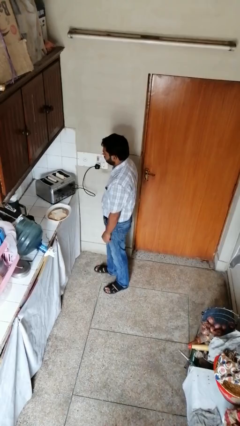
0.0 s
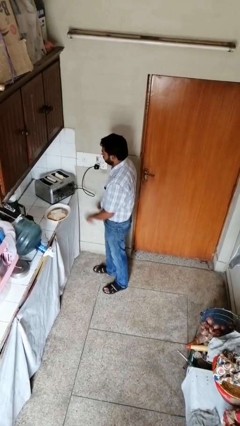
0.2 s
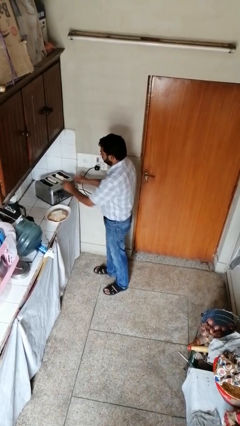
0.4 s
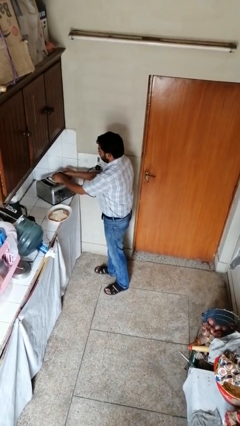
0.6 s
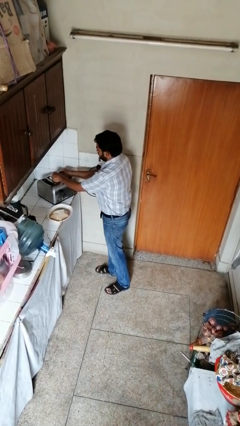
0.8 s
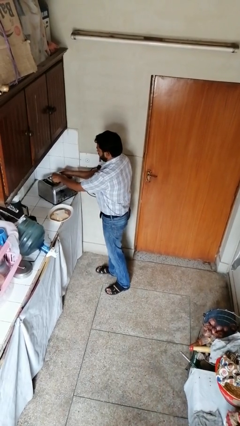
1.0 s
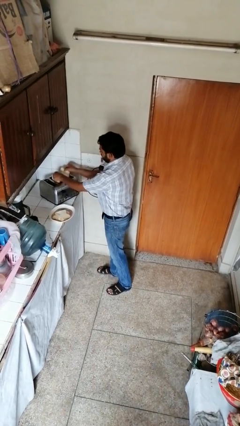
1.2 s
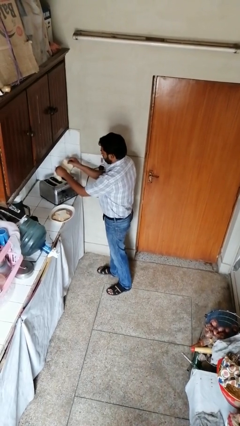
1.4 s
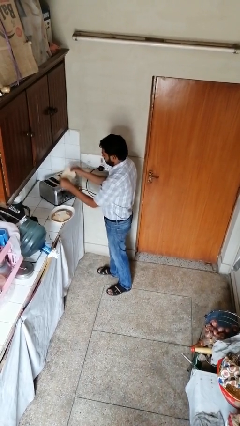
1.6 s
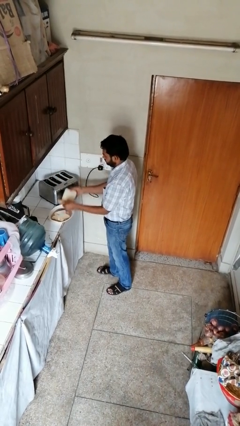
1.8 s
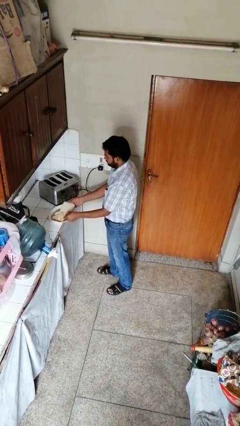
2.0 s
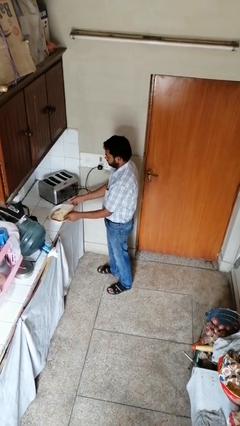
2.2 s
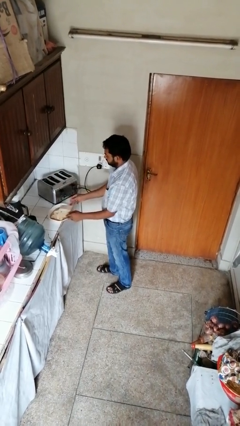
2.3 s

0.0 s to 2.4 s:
person takes object from toaster

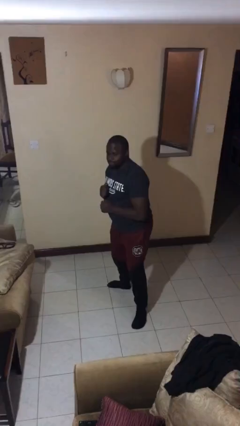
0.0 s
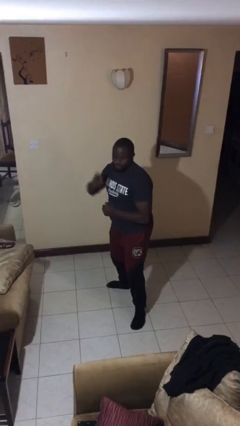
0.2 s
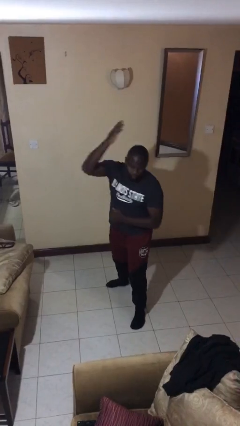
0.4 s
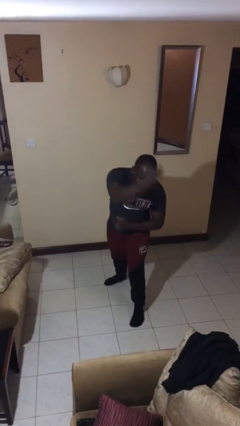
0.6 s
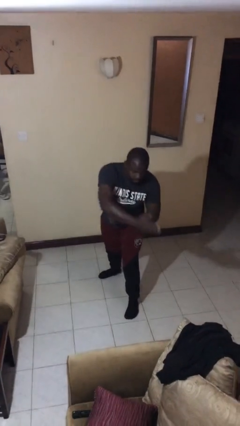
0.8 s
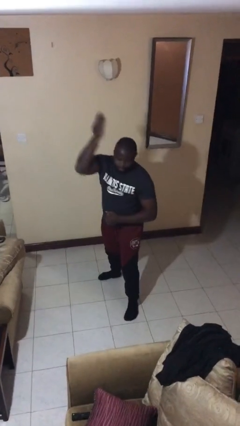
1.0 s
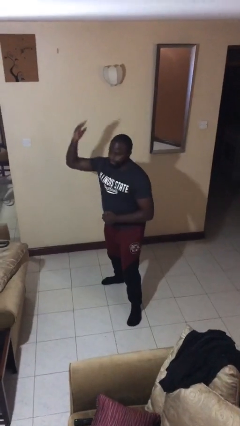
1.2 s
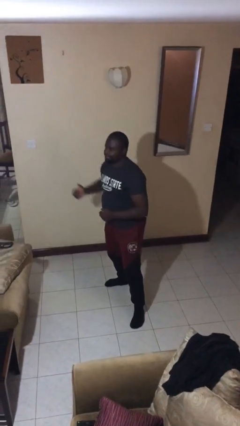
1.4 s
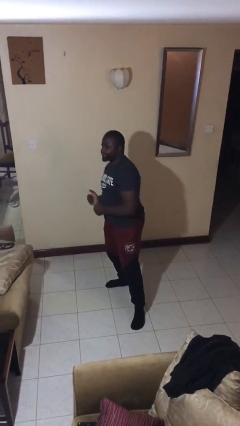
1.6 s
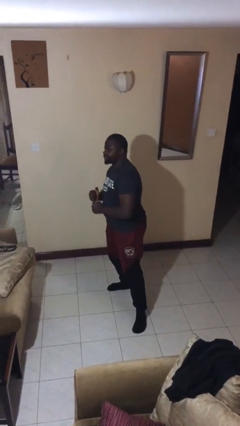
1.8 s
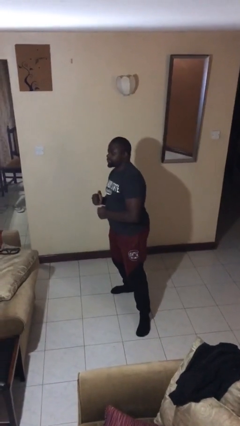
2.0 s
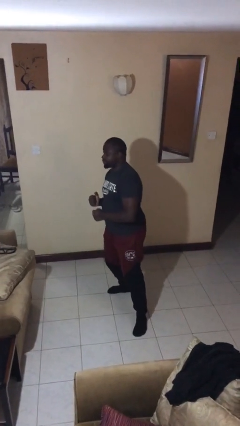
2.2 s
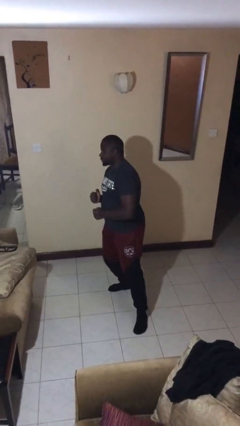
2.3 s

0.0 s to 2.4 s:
person karate chop

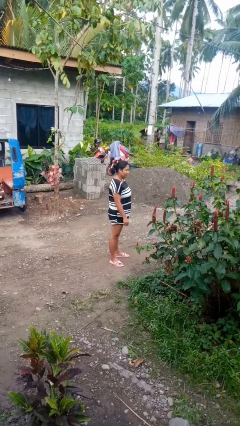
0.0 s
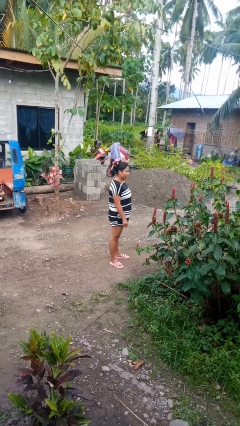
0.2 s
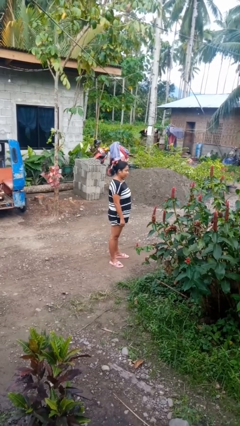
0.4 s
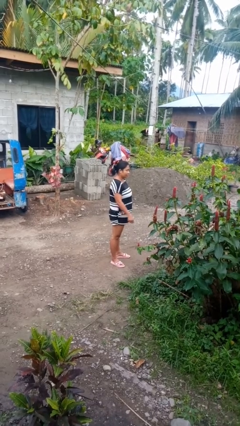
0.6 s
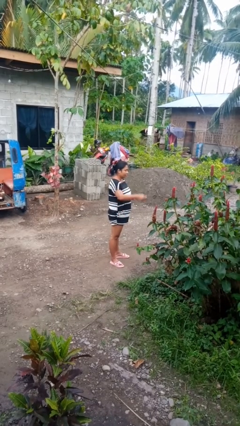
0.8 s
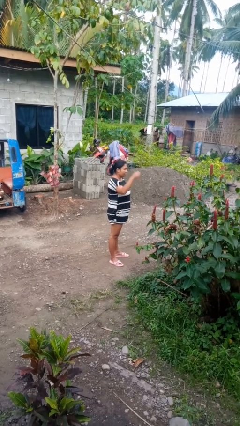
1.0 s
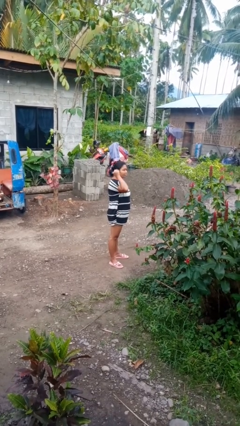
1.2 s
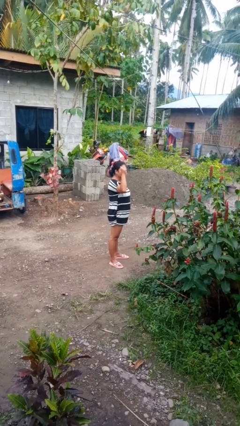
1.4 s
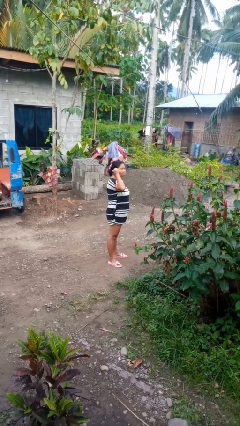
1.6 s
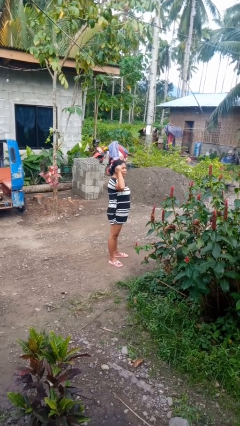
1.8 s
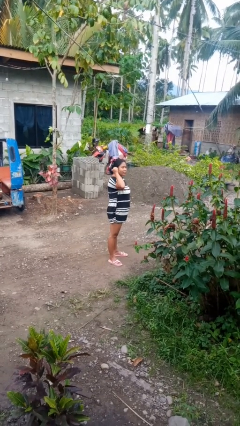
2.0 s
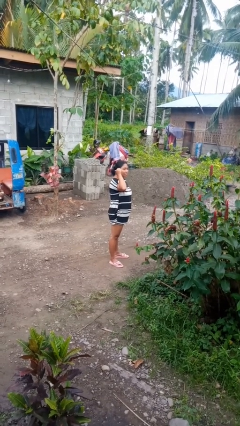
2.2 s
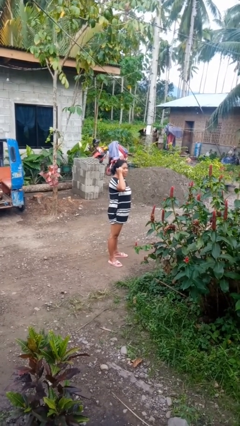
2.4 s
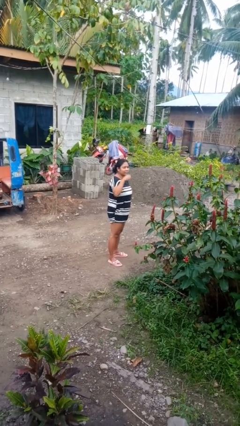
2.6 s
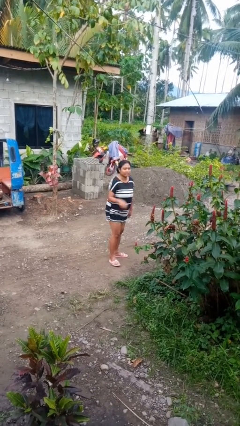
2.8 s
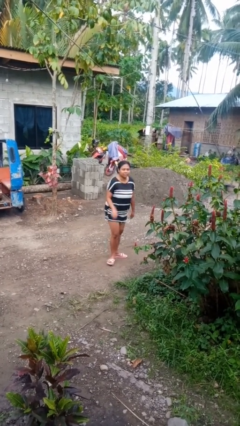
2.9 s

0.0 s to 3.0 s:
person gestures behind me

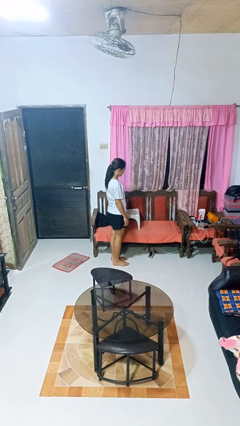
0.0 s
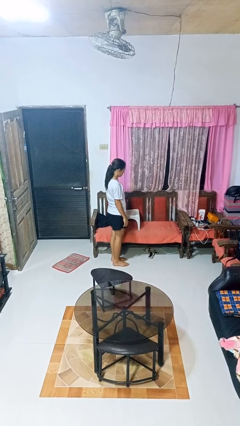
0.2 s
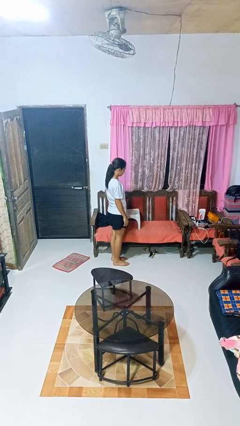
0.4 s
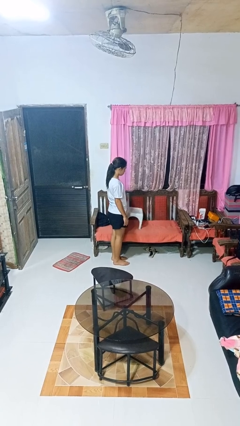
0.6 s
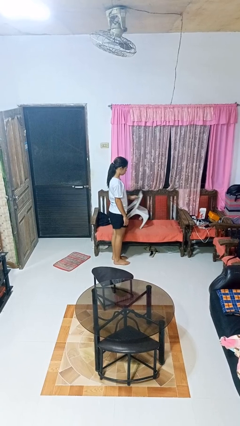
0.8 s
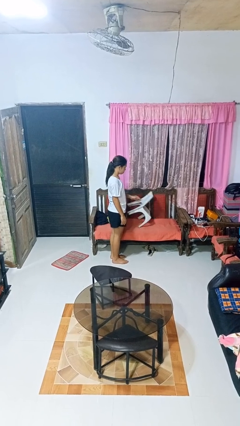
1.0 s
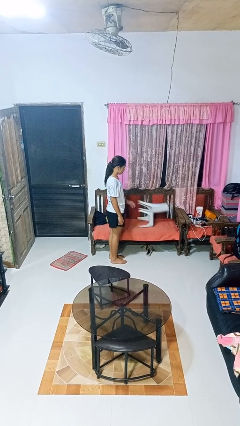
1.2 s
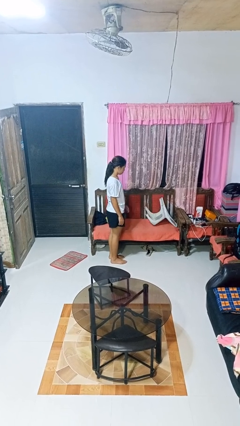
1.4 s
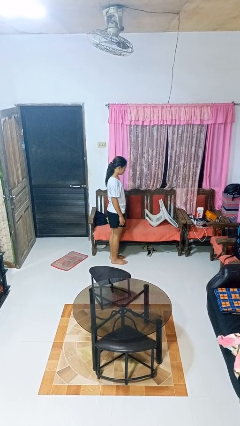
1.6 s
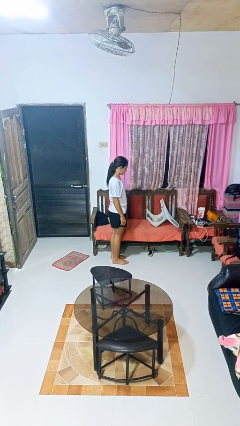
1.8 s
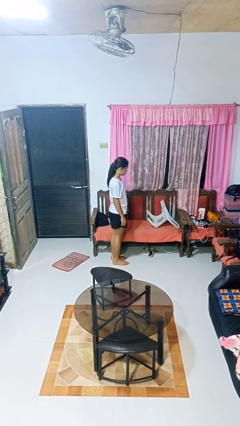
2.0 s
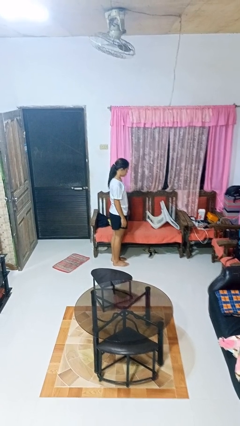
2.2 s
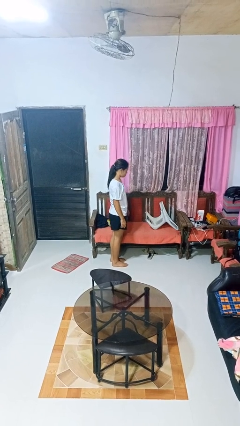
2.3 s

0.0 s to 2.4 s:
person knocks over furniture

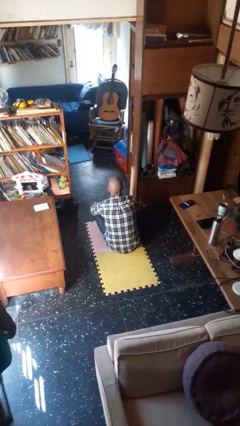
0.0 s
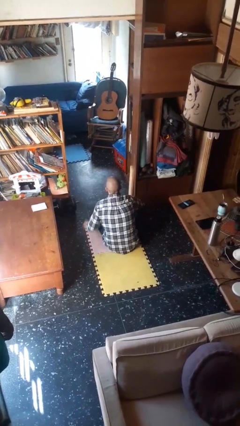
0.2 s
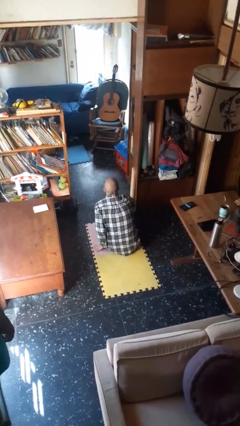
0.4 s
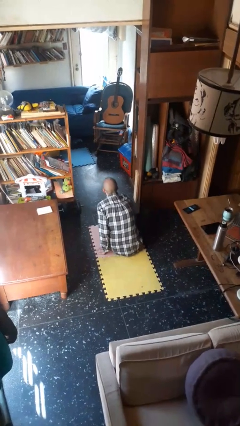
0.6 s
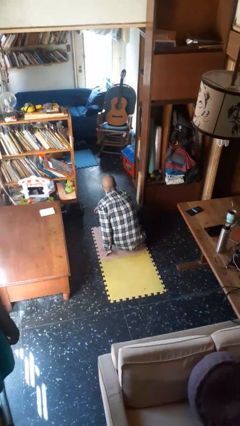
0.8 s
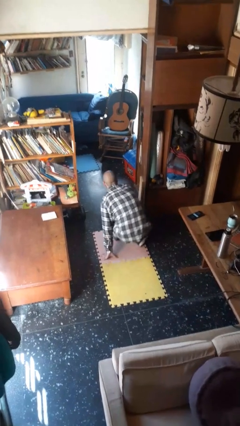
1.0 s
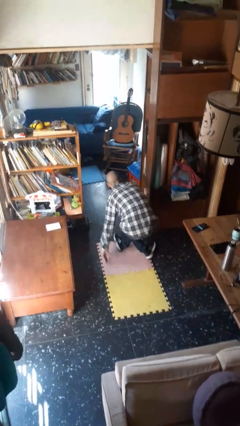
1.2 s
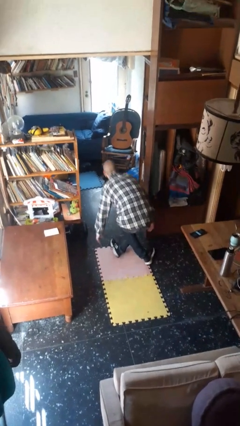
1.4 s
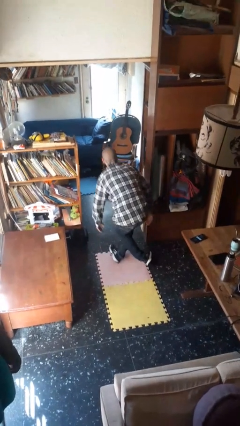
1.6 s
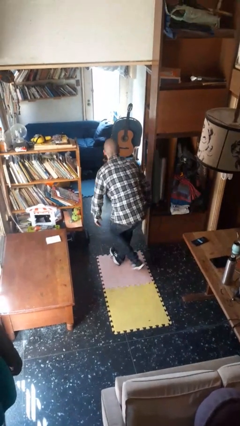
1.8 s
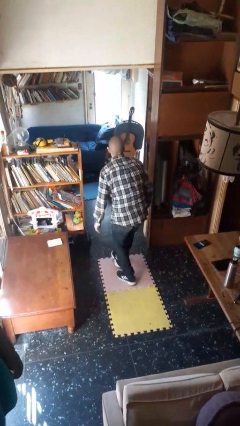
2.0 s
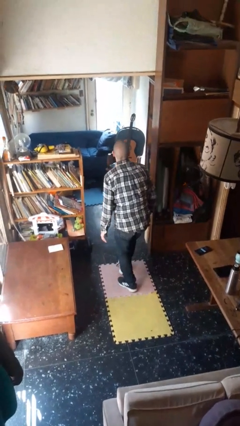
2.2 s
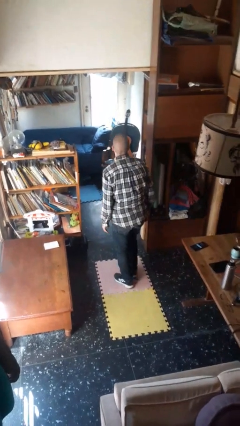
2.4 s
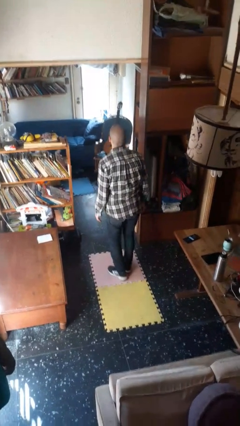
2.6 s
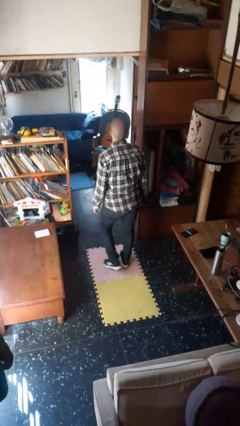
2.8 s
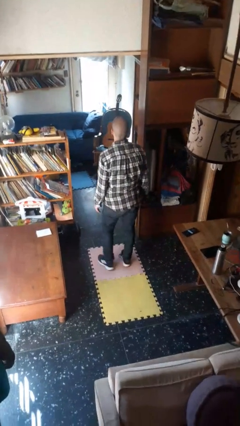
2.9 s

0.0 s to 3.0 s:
person stands up from floor

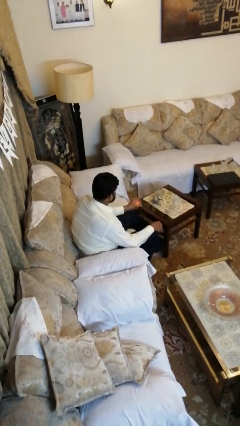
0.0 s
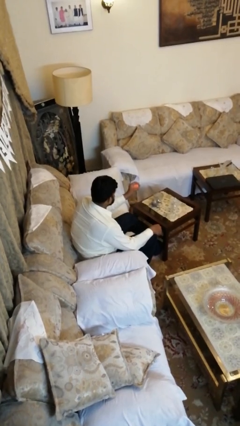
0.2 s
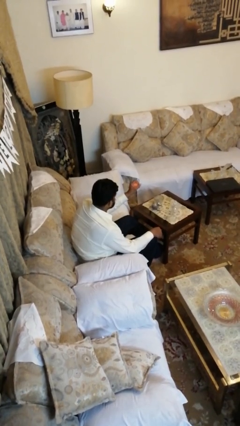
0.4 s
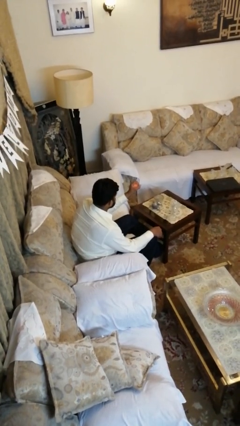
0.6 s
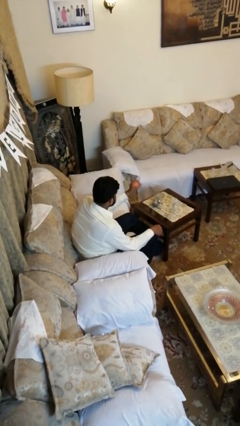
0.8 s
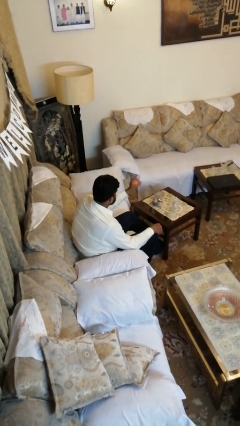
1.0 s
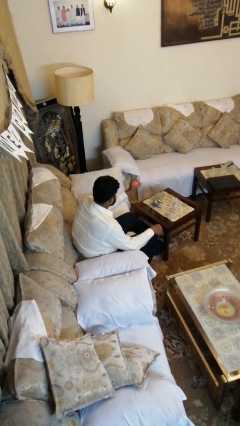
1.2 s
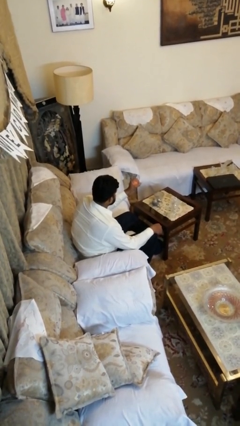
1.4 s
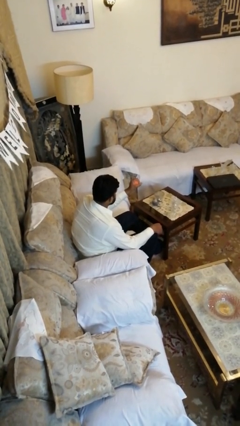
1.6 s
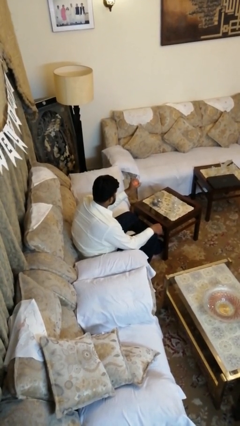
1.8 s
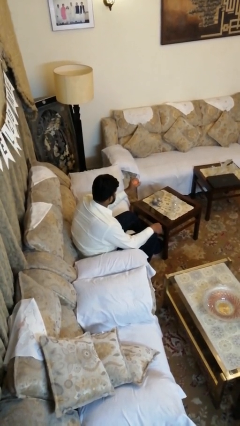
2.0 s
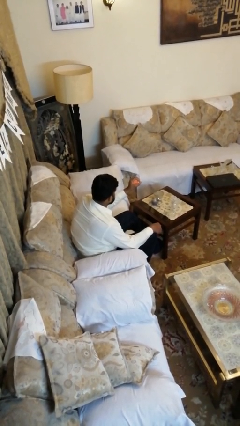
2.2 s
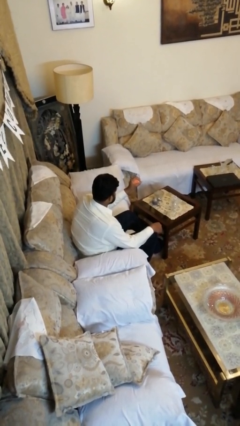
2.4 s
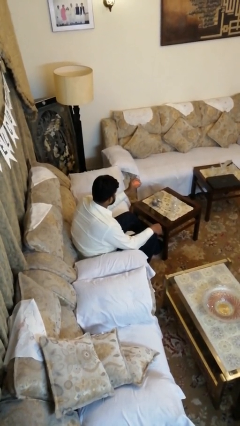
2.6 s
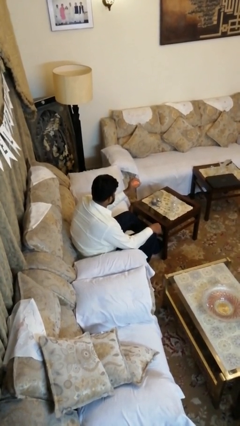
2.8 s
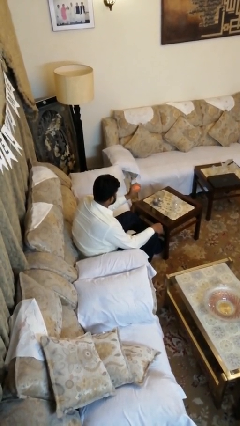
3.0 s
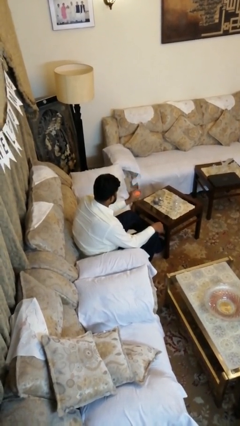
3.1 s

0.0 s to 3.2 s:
person squeezes object

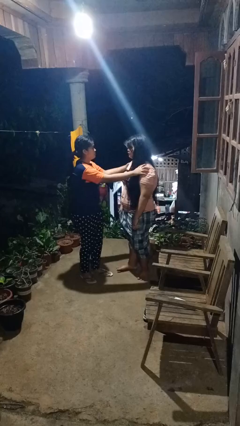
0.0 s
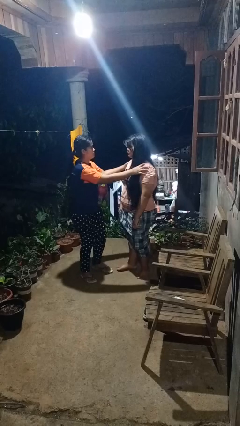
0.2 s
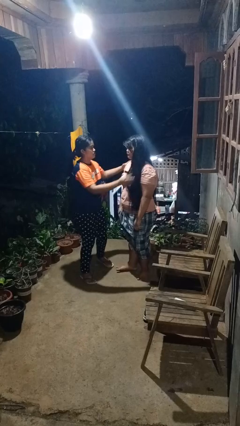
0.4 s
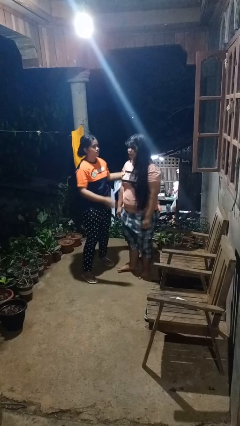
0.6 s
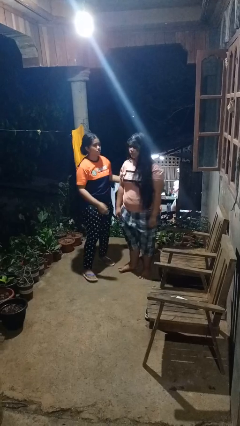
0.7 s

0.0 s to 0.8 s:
person spins person around
